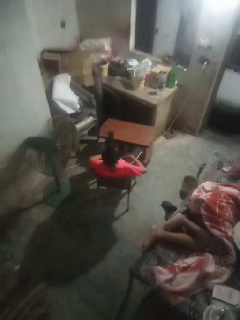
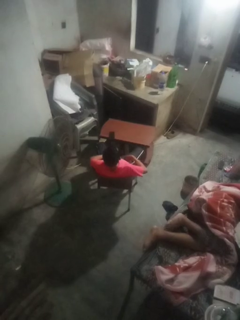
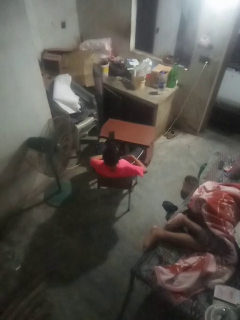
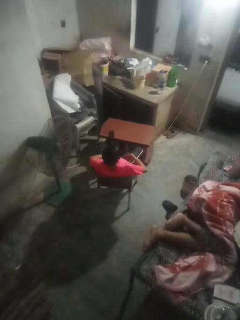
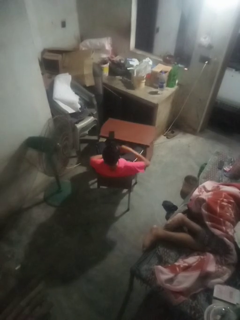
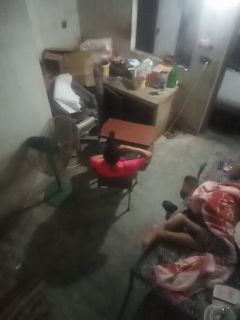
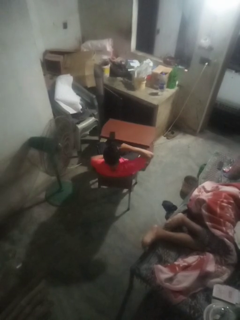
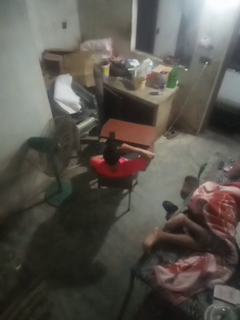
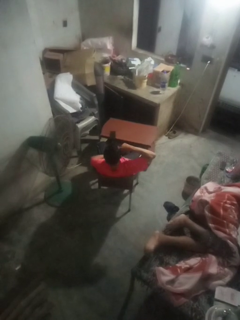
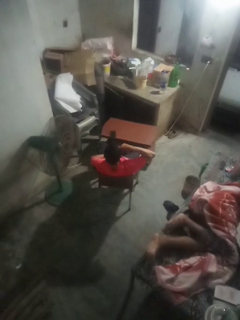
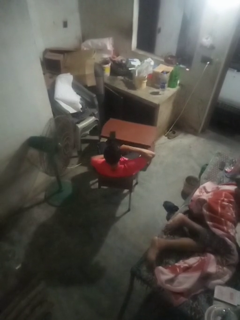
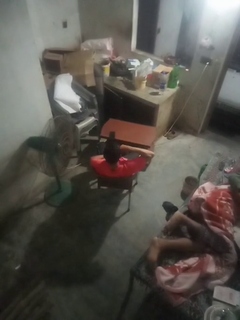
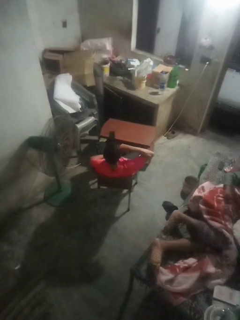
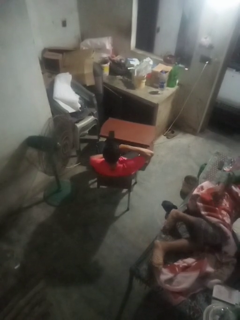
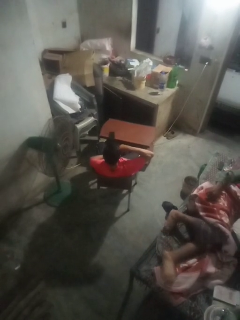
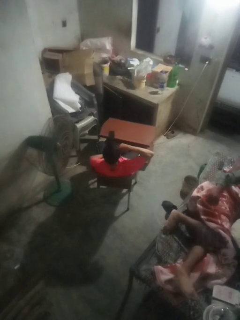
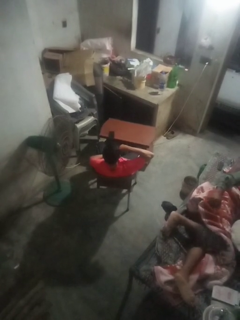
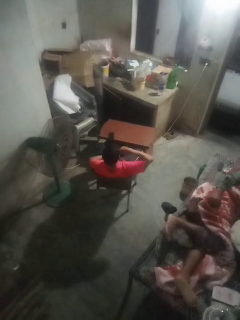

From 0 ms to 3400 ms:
person licks fingers

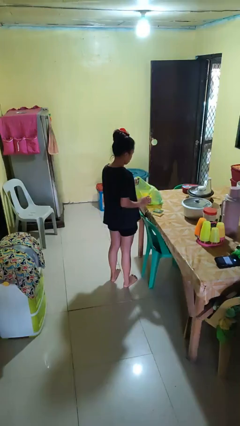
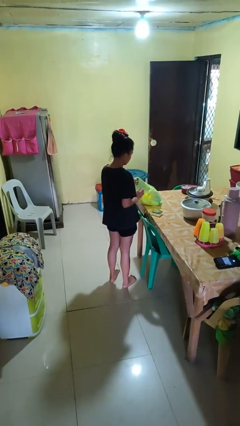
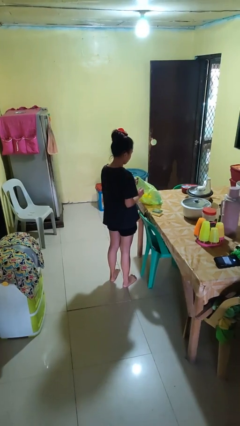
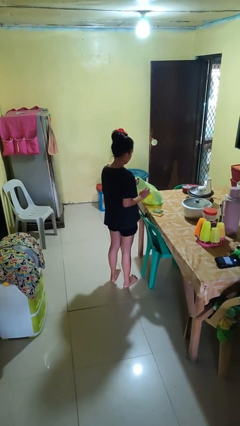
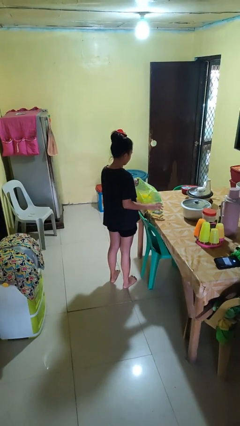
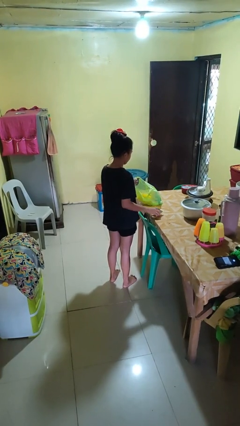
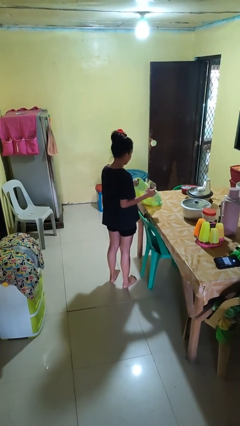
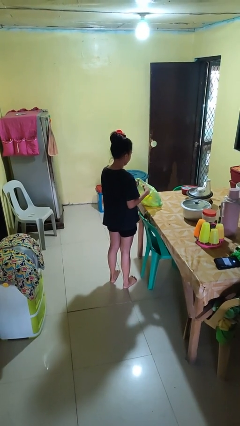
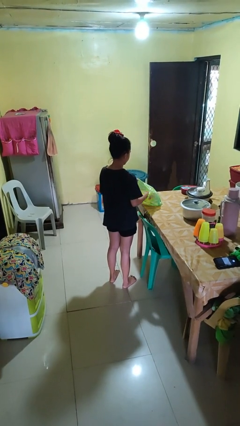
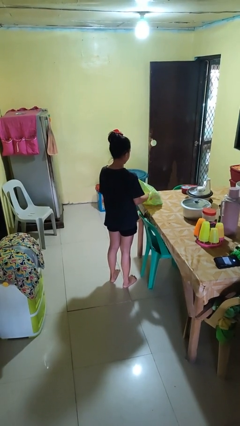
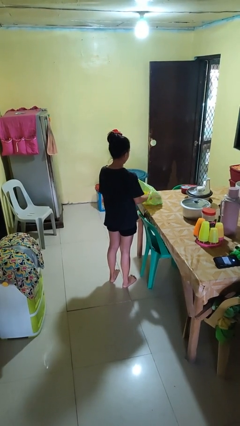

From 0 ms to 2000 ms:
person puts object into bag

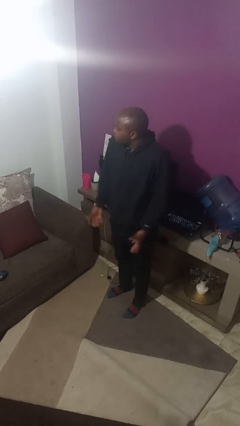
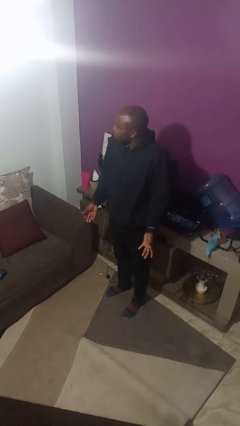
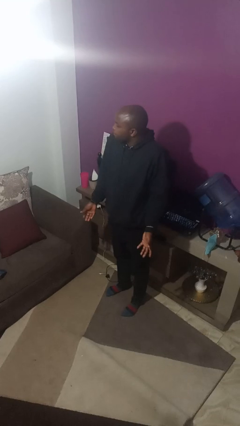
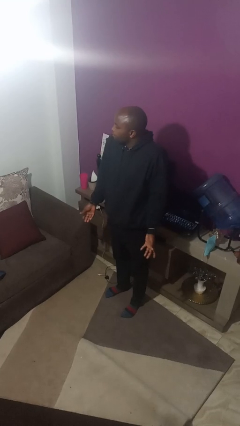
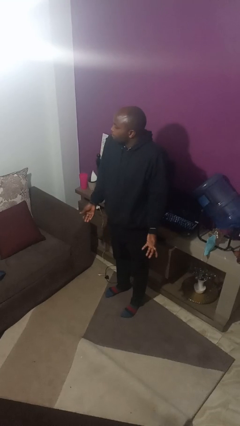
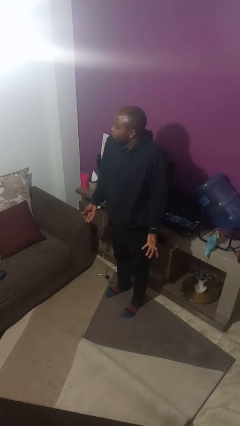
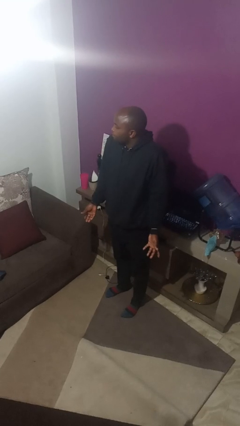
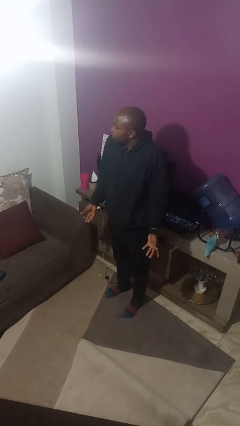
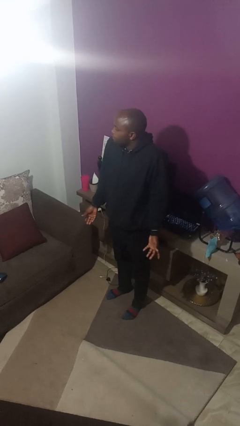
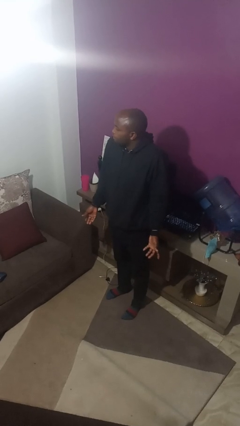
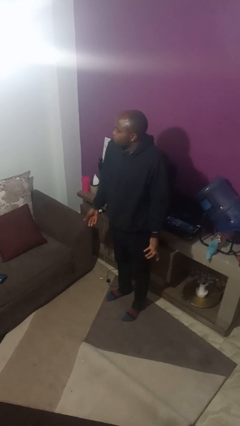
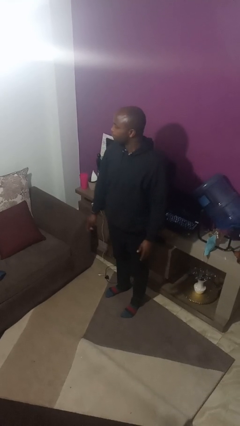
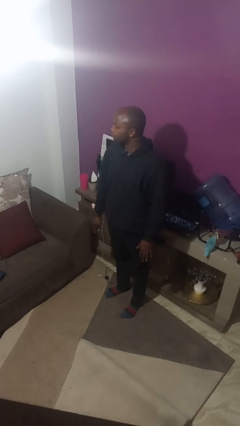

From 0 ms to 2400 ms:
person shrugs

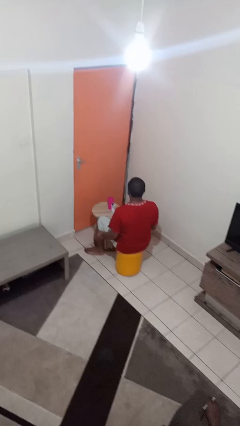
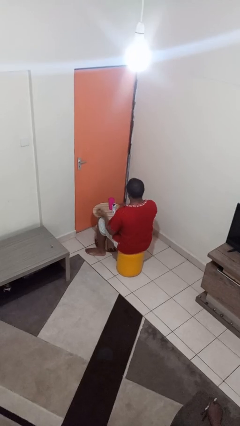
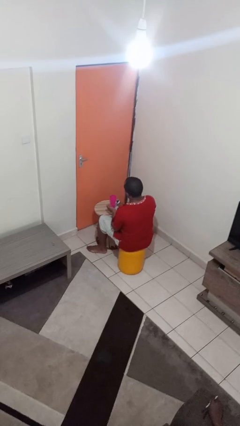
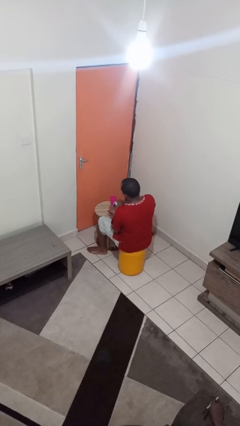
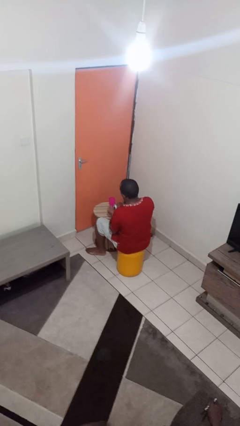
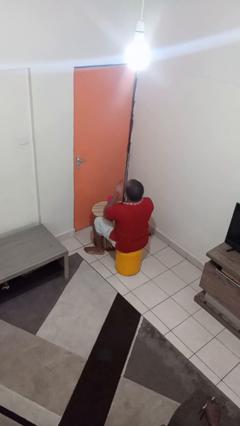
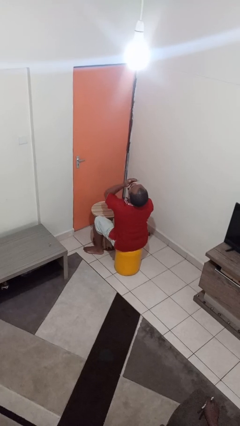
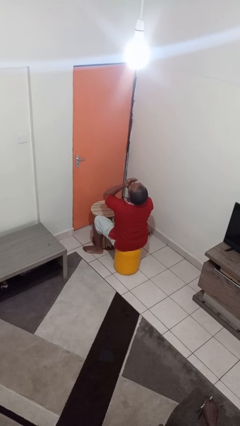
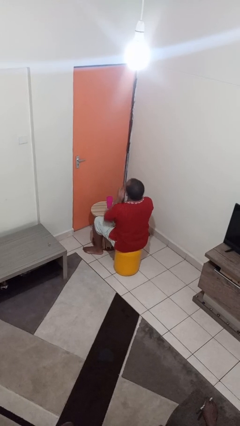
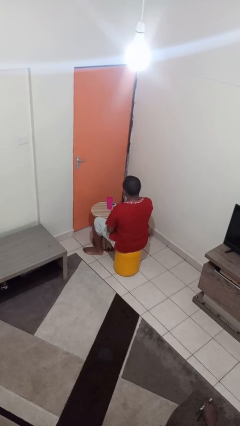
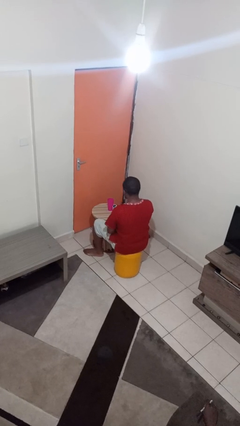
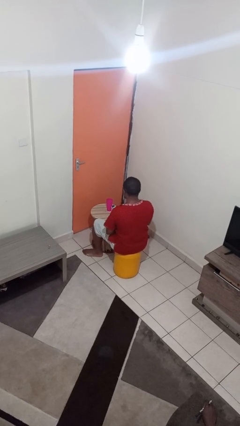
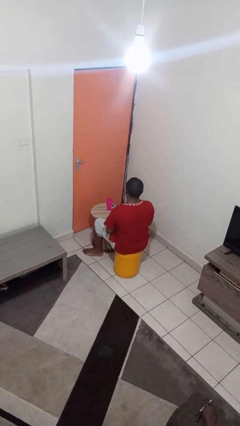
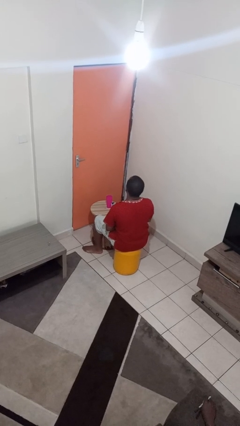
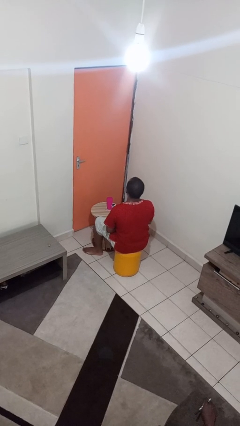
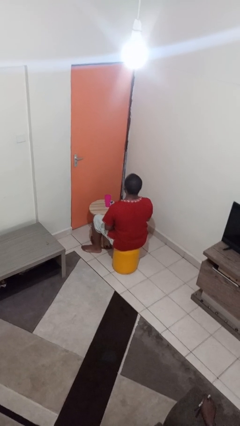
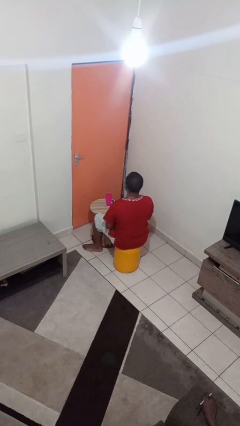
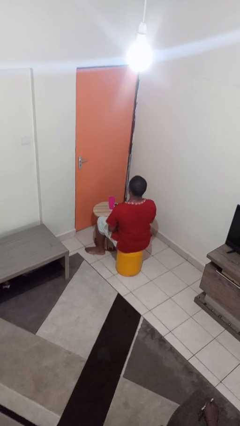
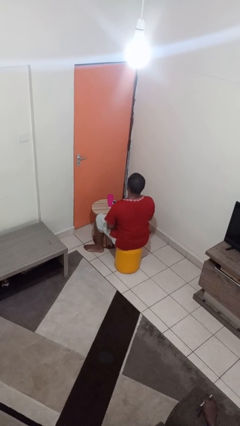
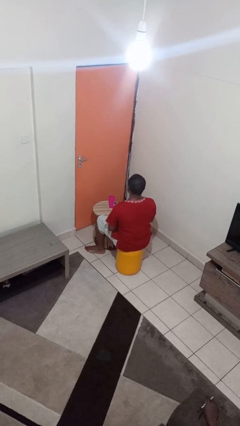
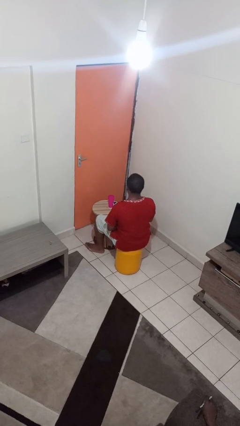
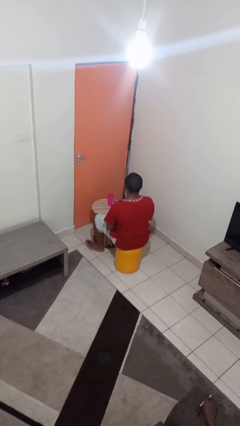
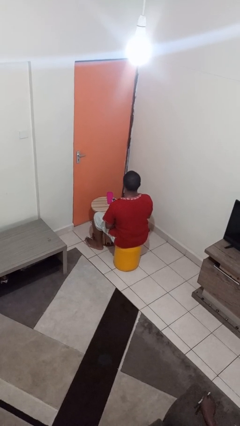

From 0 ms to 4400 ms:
person takes medicine pills

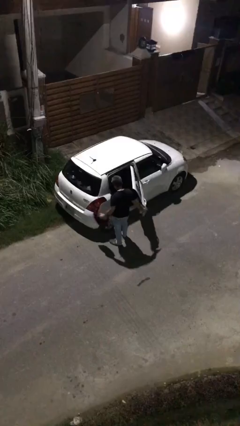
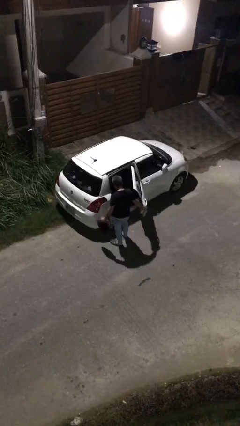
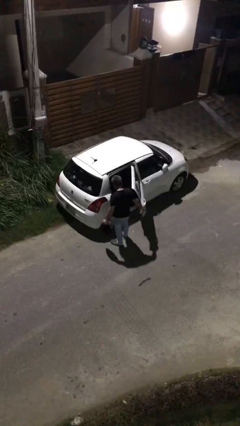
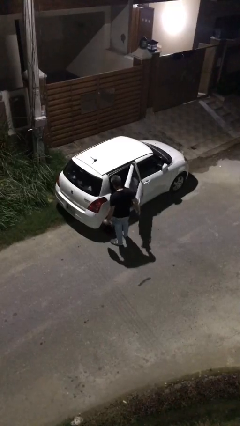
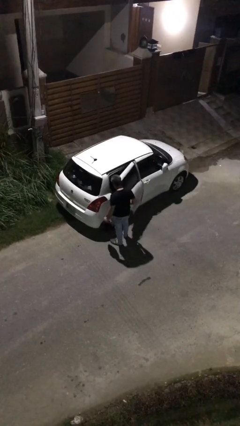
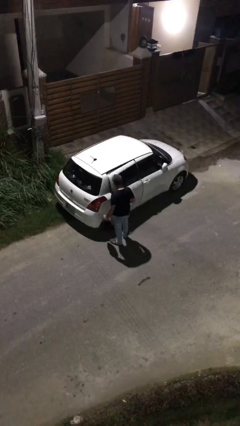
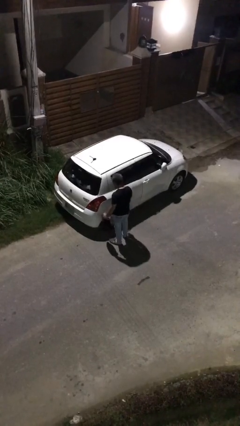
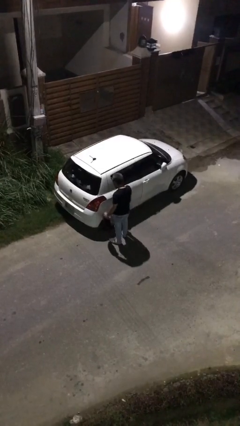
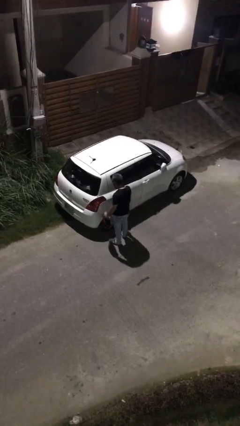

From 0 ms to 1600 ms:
person closes car door

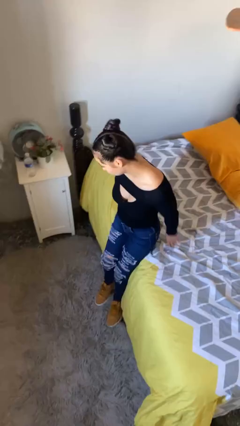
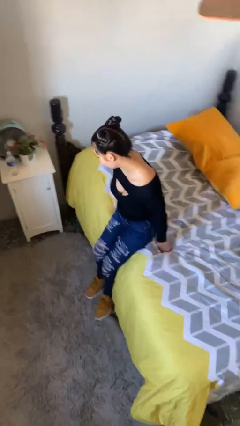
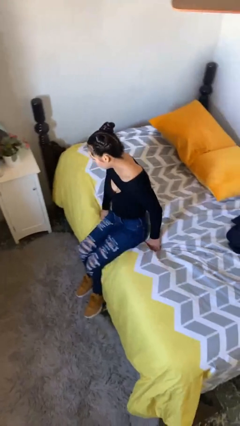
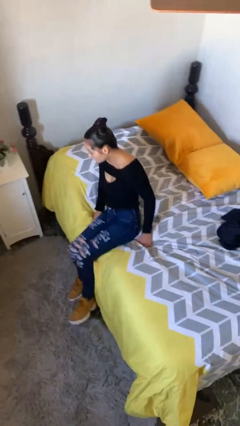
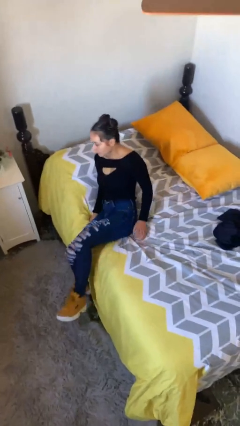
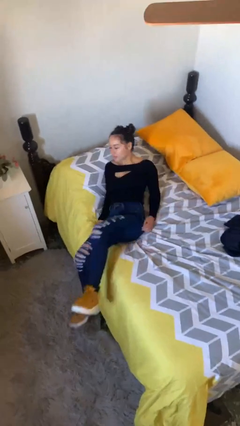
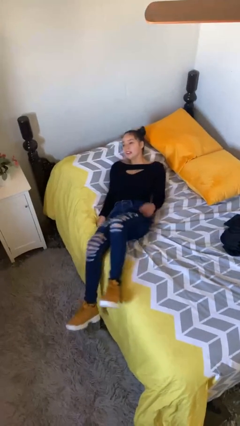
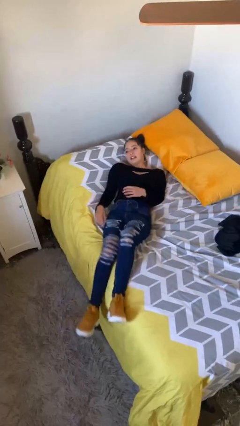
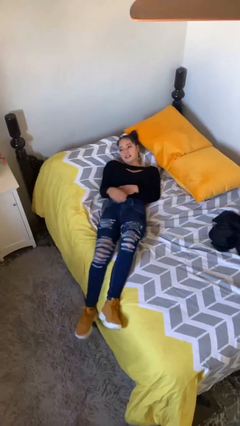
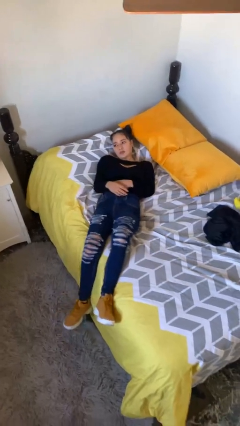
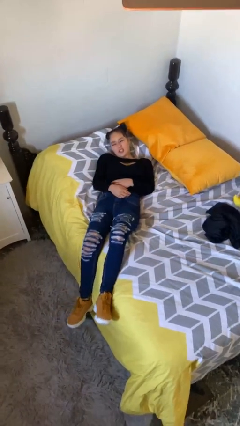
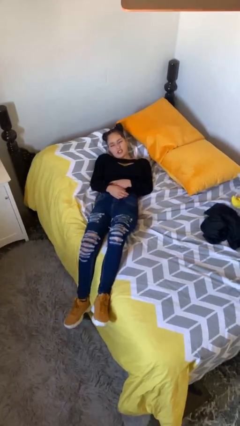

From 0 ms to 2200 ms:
person lies down on bed

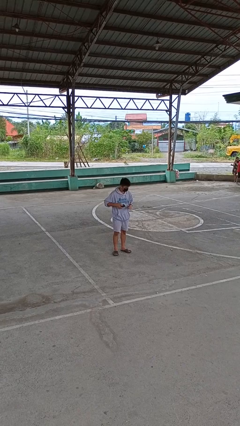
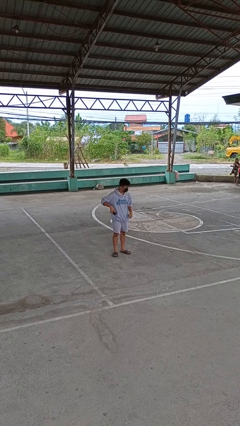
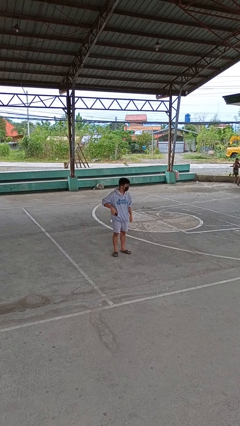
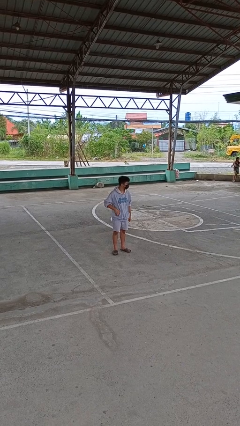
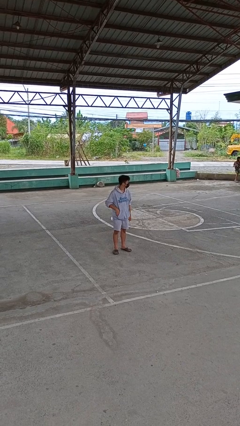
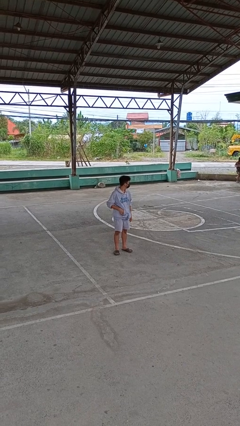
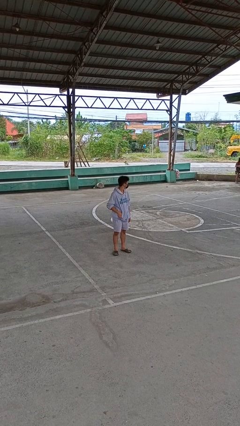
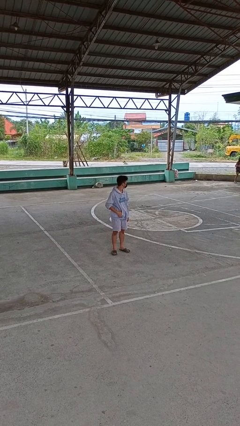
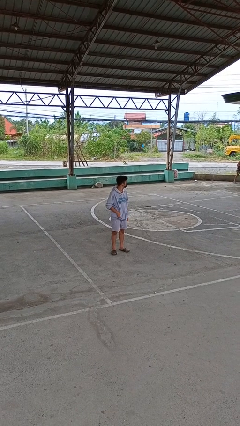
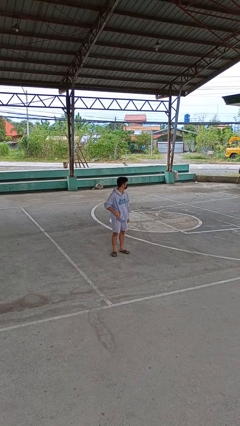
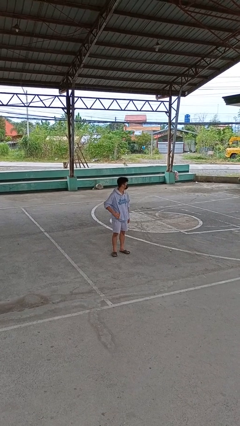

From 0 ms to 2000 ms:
person puts phone into pocket
